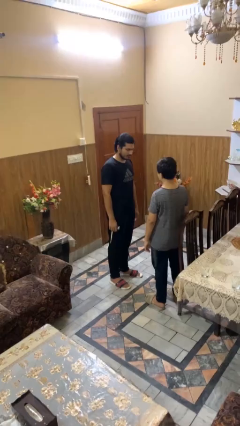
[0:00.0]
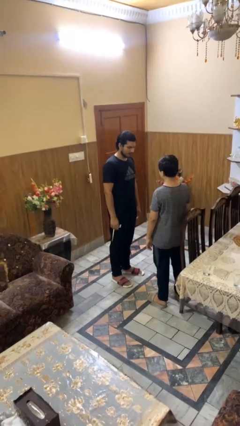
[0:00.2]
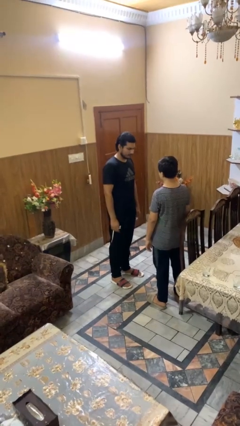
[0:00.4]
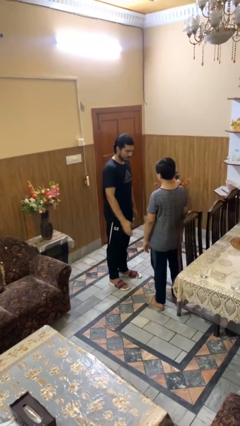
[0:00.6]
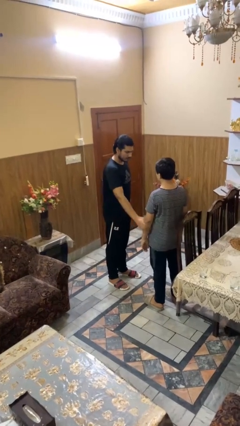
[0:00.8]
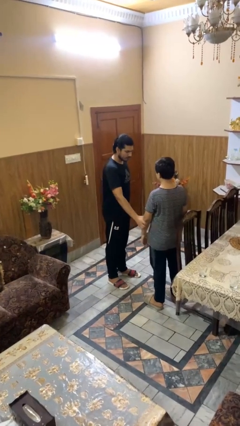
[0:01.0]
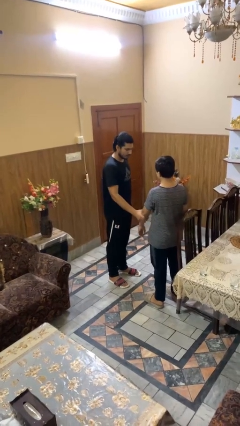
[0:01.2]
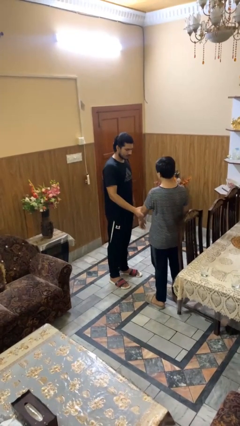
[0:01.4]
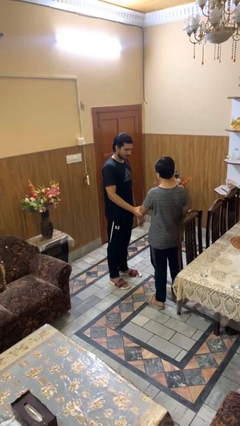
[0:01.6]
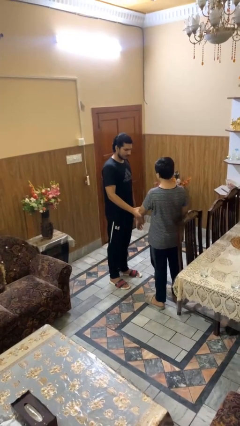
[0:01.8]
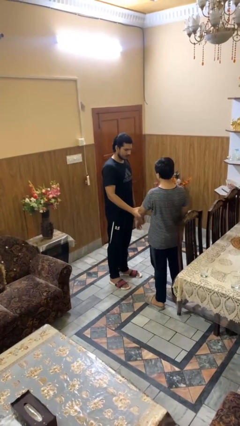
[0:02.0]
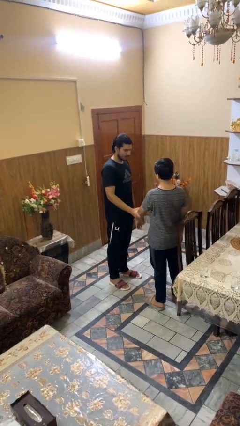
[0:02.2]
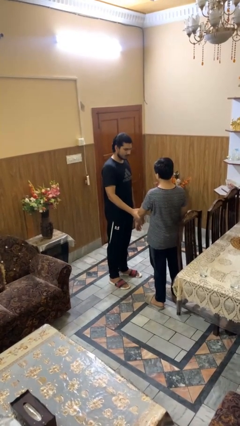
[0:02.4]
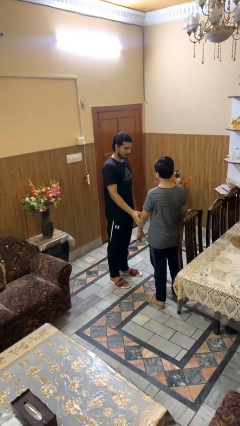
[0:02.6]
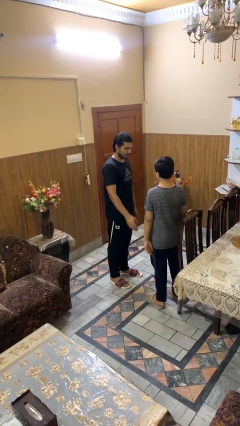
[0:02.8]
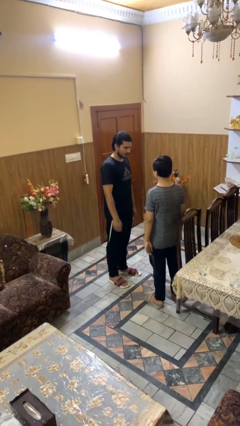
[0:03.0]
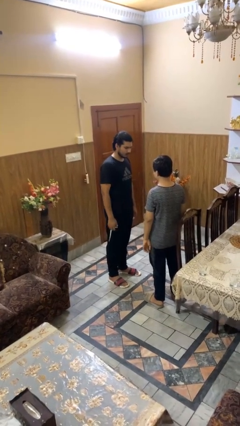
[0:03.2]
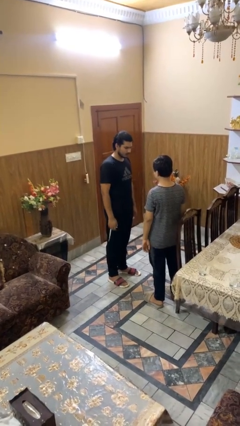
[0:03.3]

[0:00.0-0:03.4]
person grabs person by forearm

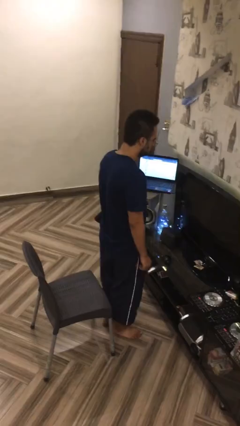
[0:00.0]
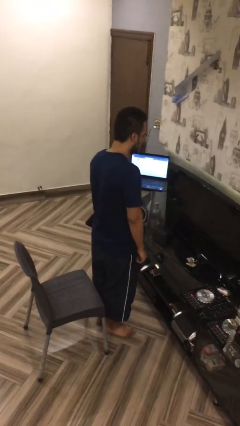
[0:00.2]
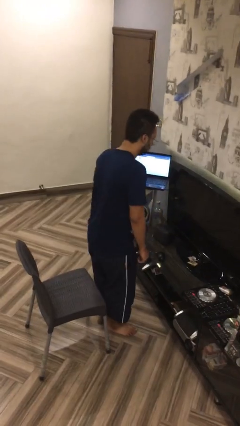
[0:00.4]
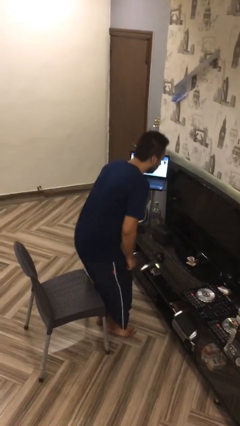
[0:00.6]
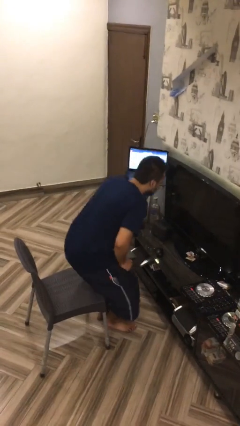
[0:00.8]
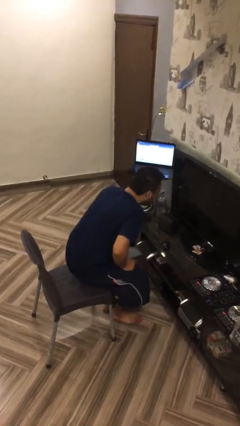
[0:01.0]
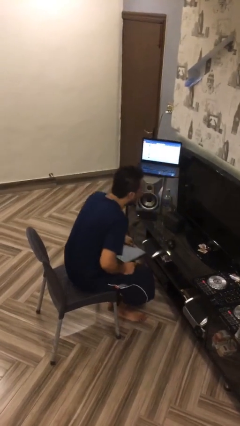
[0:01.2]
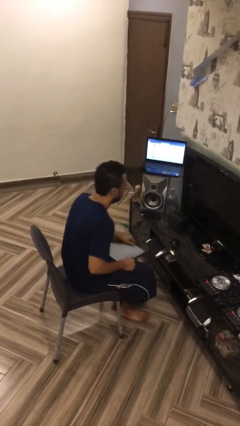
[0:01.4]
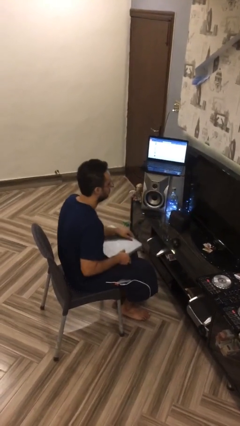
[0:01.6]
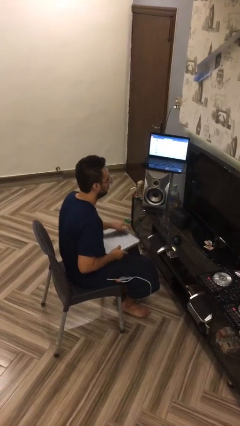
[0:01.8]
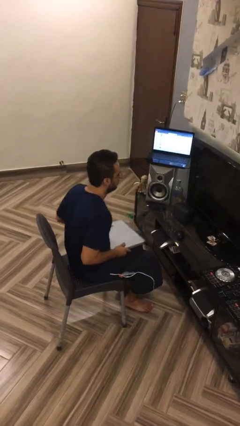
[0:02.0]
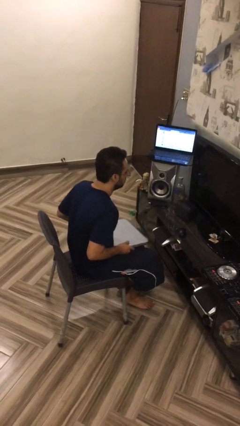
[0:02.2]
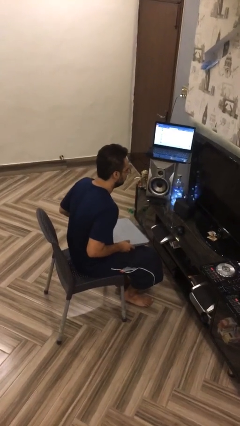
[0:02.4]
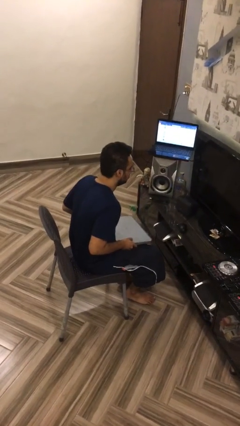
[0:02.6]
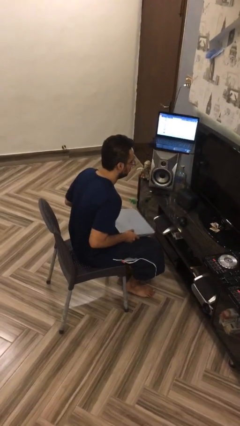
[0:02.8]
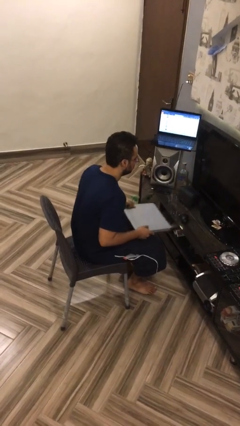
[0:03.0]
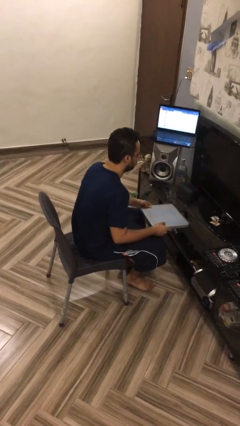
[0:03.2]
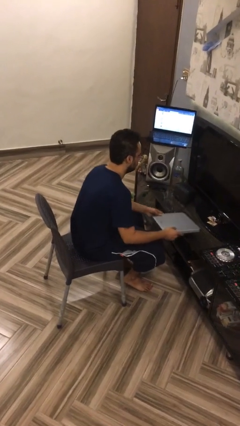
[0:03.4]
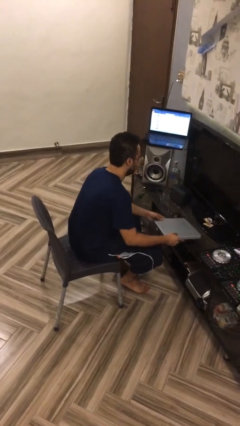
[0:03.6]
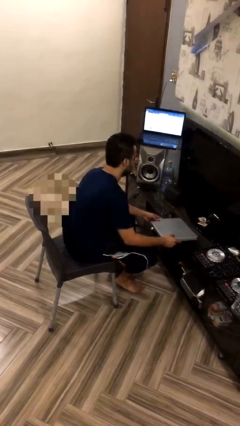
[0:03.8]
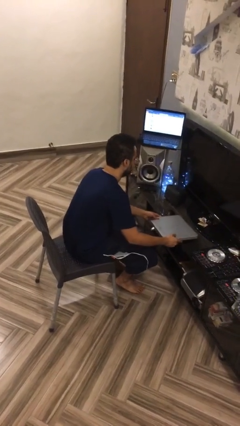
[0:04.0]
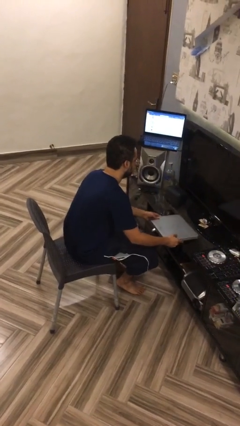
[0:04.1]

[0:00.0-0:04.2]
person sits down

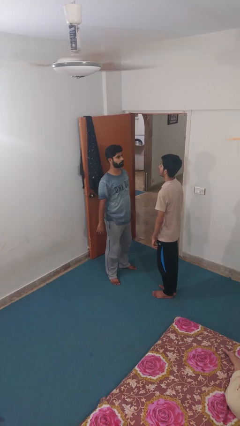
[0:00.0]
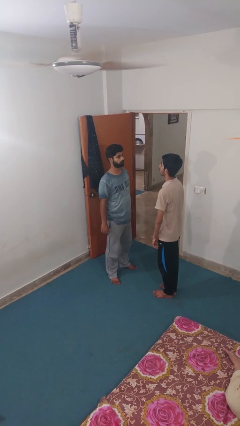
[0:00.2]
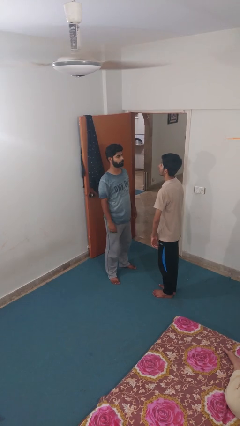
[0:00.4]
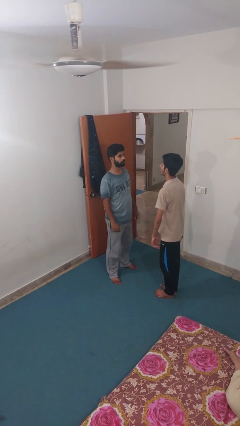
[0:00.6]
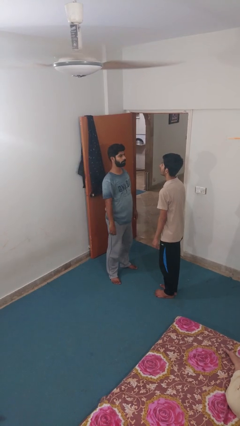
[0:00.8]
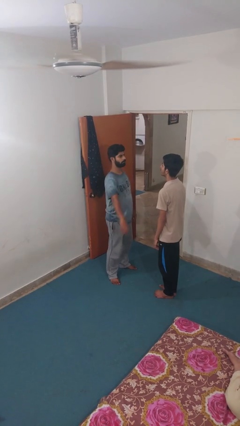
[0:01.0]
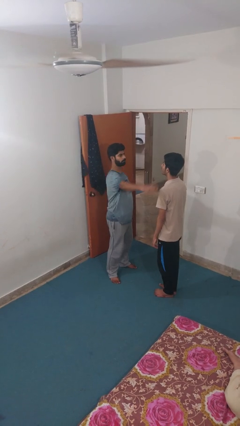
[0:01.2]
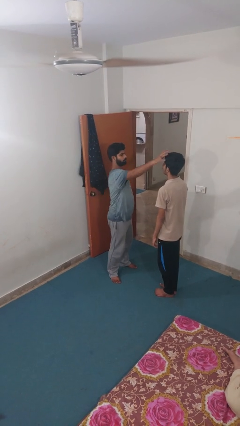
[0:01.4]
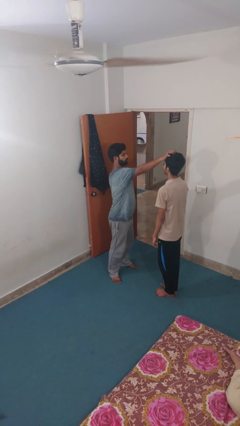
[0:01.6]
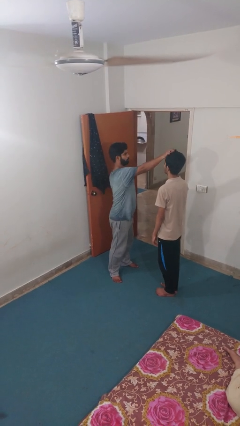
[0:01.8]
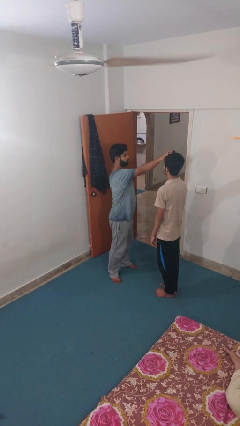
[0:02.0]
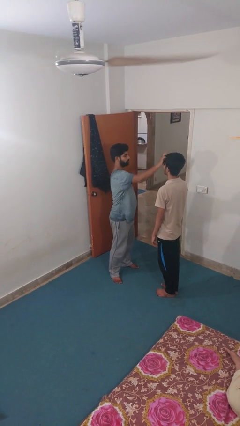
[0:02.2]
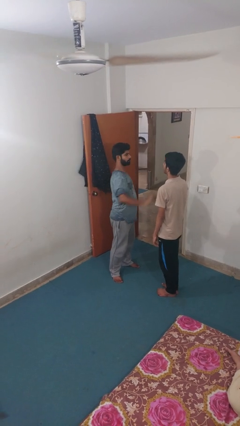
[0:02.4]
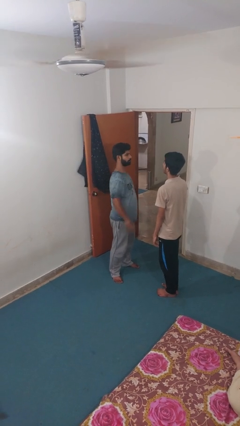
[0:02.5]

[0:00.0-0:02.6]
person grabs person by hair

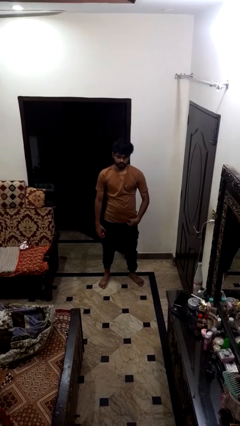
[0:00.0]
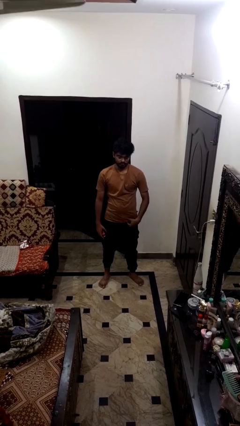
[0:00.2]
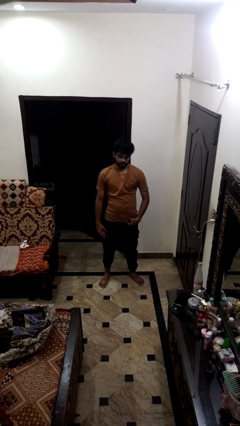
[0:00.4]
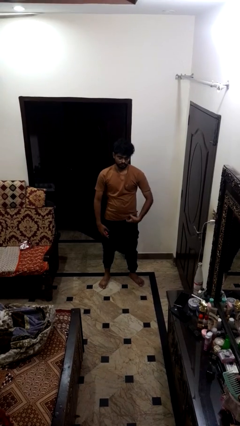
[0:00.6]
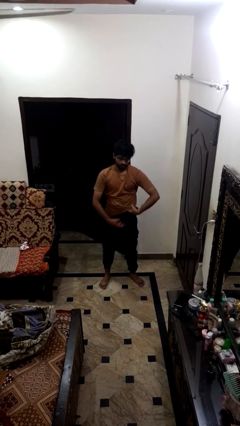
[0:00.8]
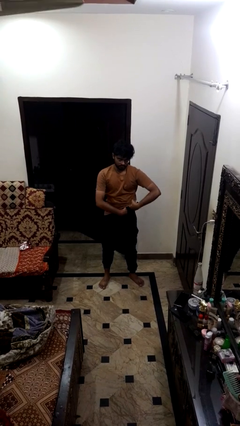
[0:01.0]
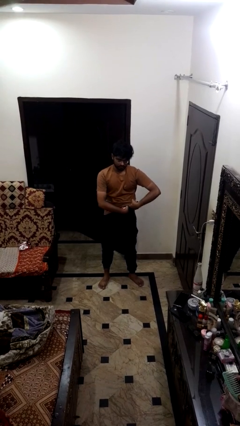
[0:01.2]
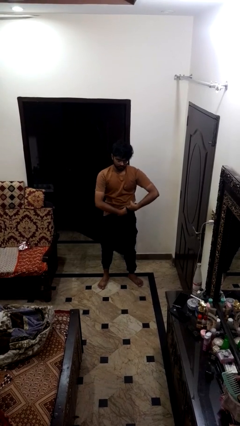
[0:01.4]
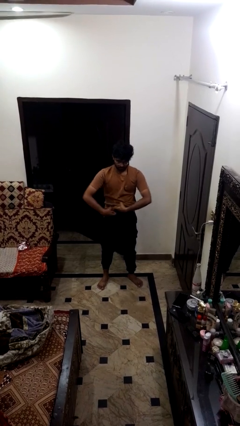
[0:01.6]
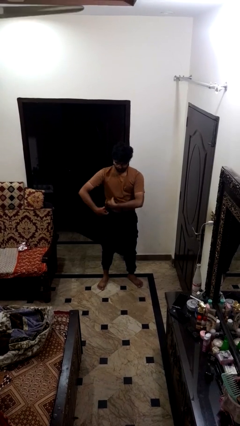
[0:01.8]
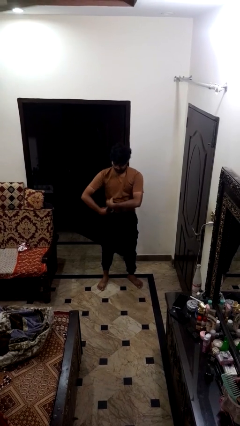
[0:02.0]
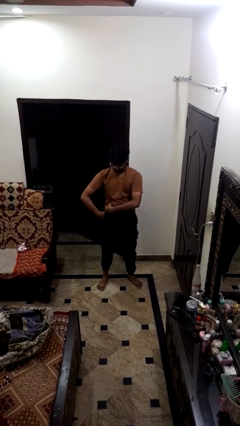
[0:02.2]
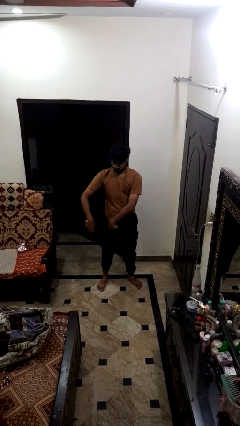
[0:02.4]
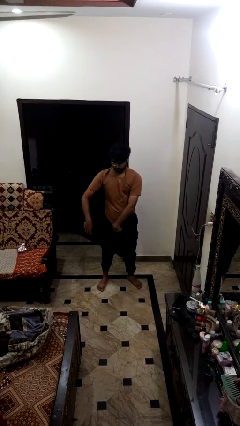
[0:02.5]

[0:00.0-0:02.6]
person applies deodorant

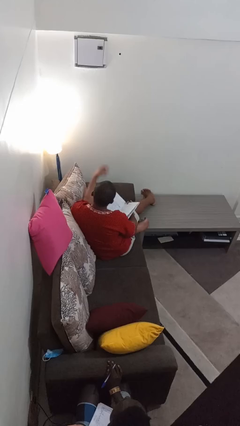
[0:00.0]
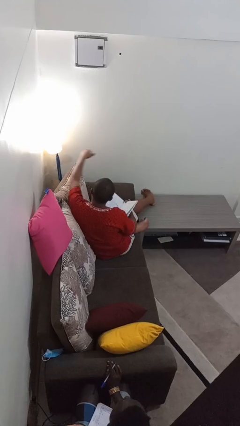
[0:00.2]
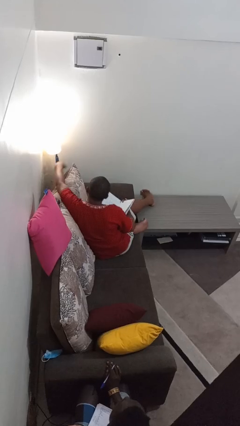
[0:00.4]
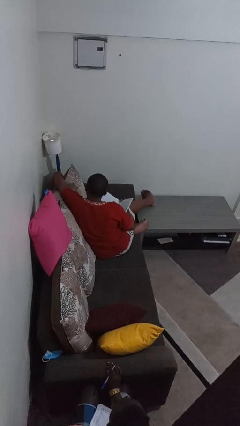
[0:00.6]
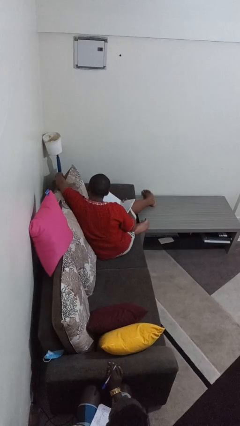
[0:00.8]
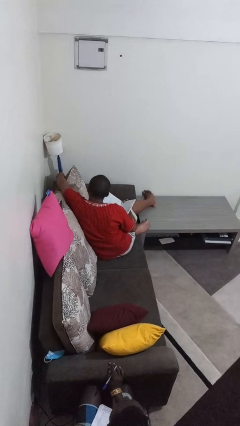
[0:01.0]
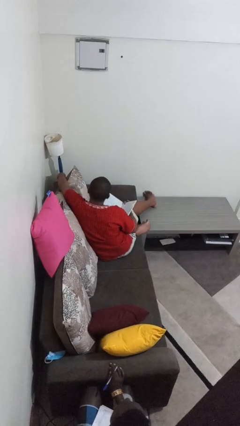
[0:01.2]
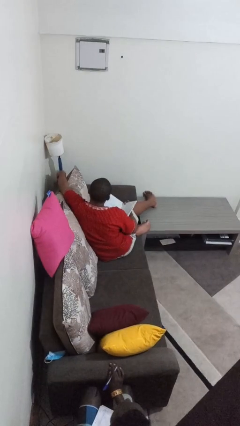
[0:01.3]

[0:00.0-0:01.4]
person turns off lamp

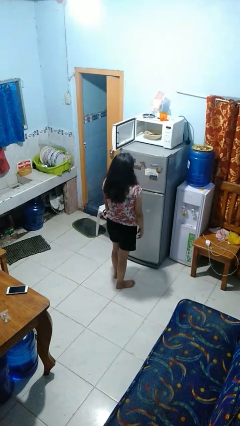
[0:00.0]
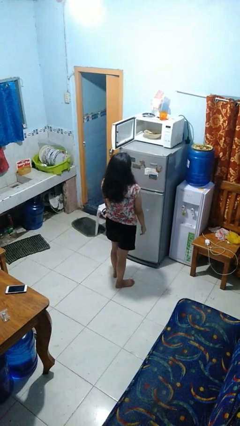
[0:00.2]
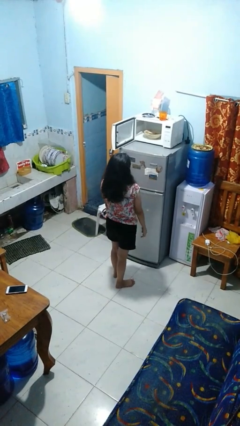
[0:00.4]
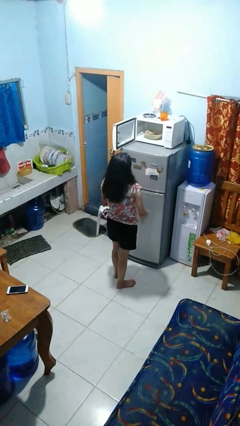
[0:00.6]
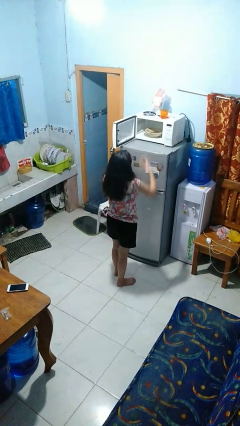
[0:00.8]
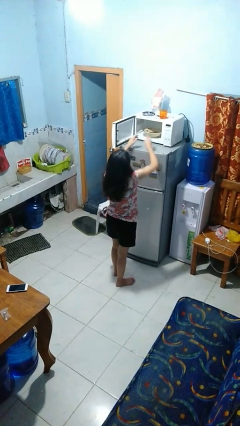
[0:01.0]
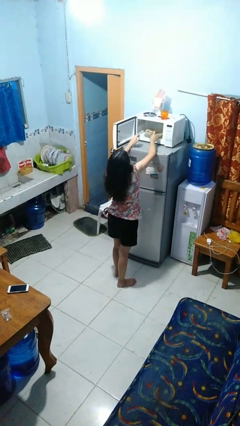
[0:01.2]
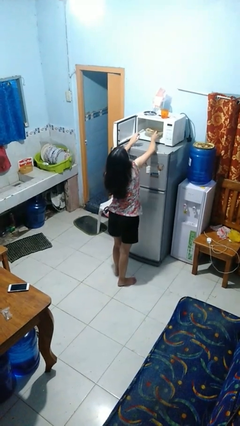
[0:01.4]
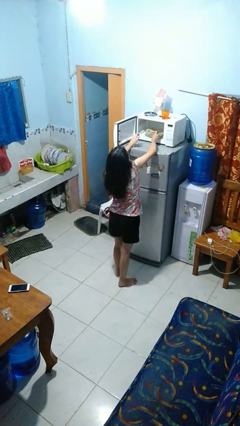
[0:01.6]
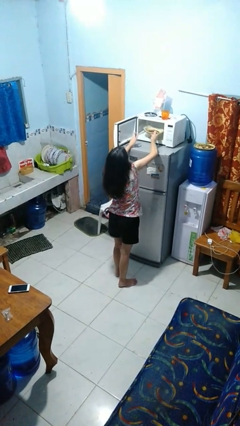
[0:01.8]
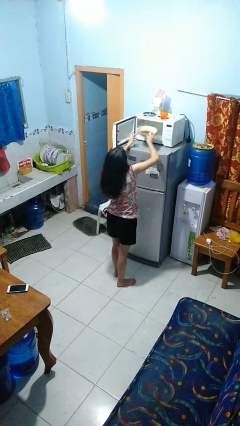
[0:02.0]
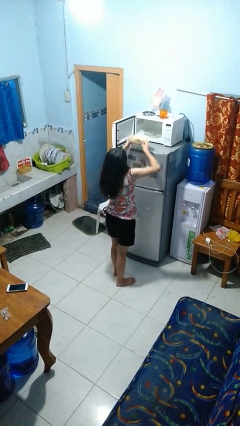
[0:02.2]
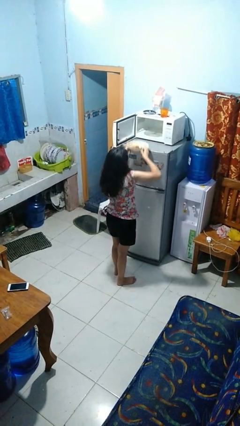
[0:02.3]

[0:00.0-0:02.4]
person takes object from microwave

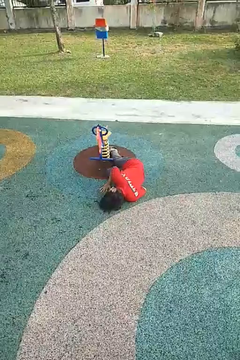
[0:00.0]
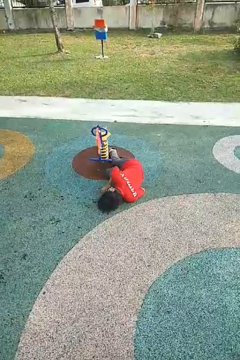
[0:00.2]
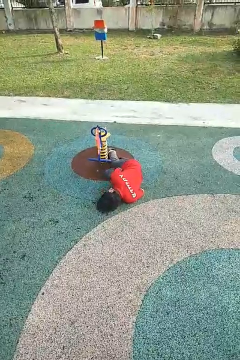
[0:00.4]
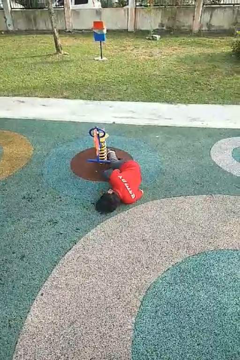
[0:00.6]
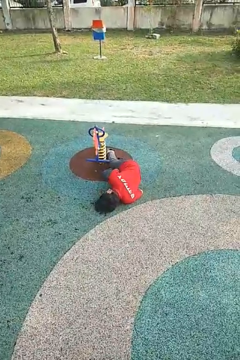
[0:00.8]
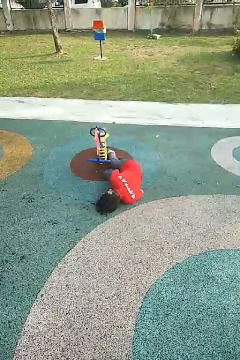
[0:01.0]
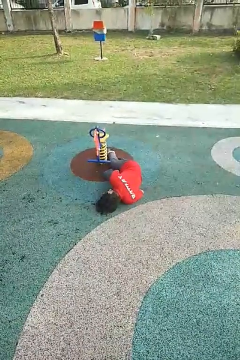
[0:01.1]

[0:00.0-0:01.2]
person lies down on floor
